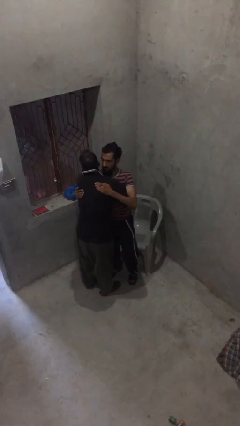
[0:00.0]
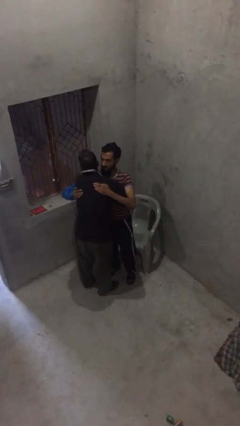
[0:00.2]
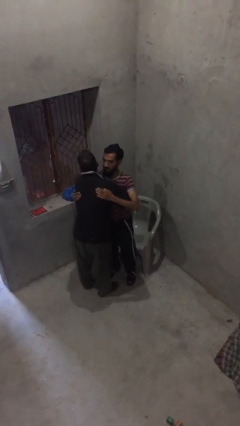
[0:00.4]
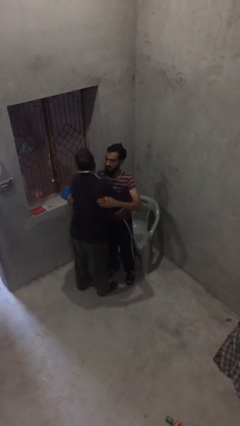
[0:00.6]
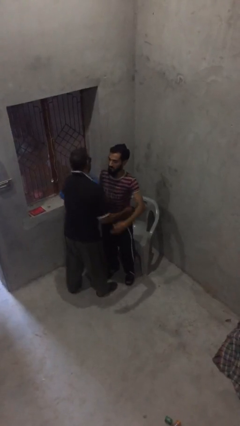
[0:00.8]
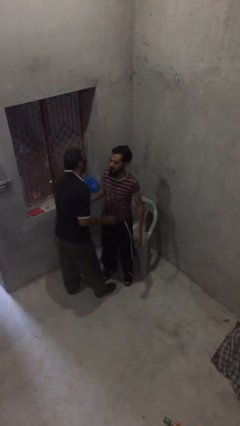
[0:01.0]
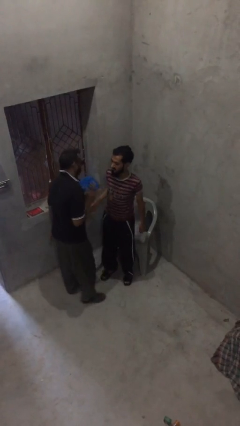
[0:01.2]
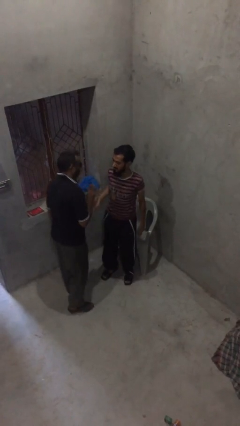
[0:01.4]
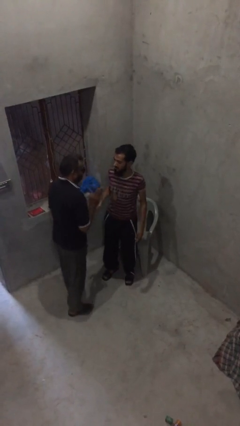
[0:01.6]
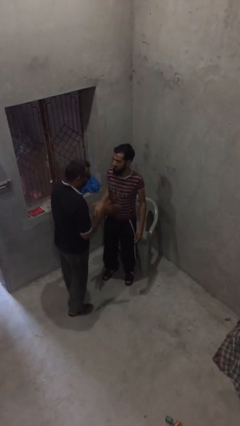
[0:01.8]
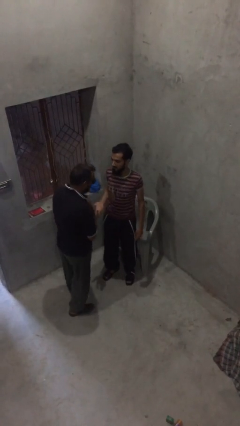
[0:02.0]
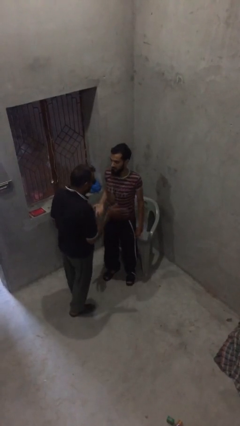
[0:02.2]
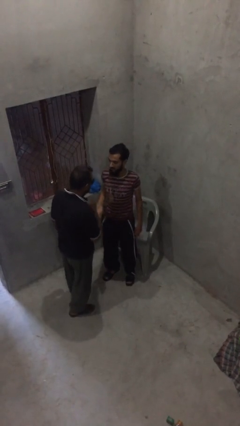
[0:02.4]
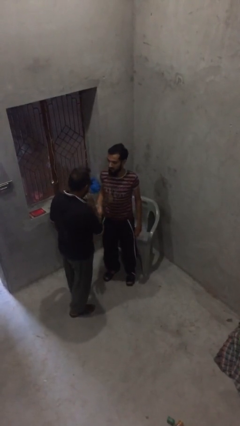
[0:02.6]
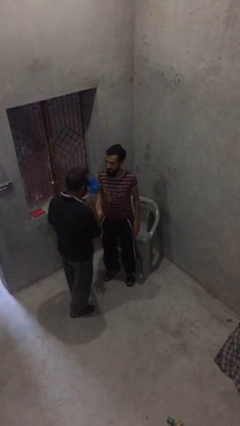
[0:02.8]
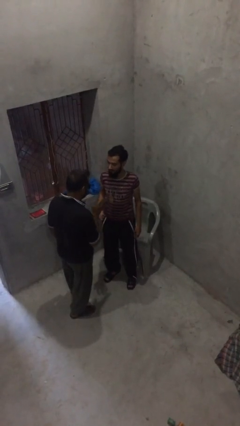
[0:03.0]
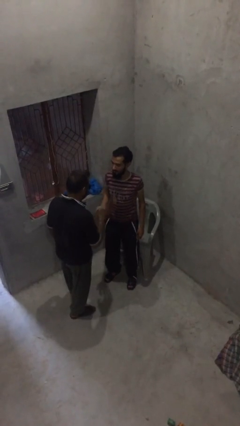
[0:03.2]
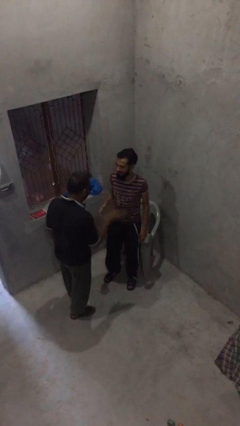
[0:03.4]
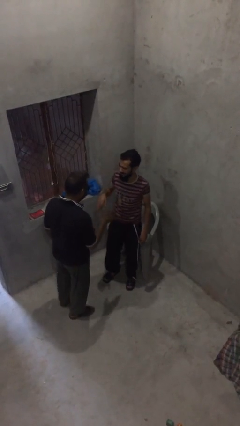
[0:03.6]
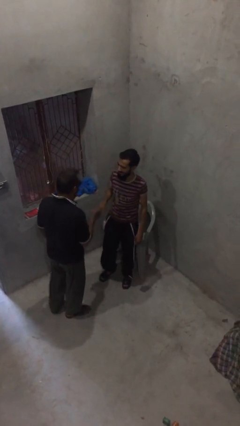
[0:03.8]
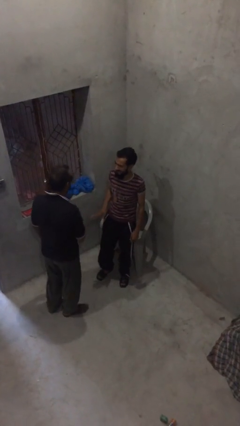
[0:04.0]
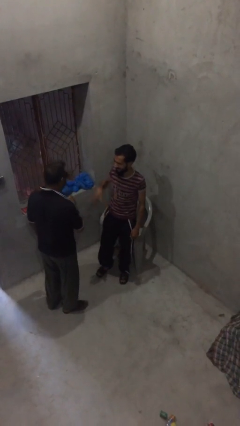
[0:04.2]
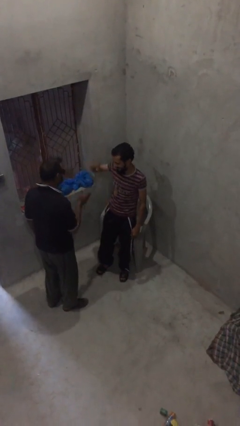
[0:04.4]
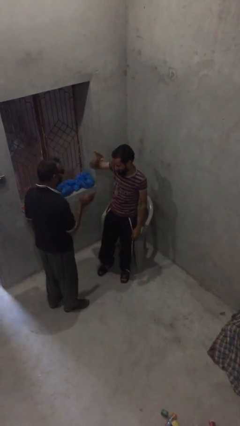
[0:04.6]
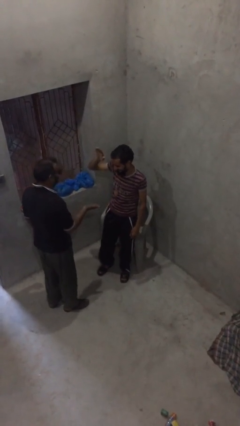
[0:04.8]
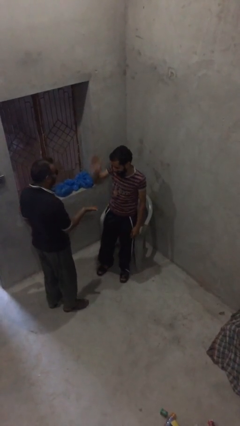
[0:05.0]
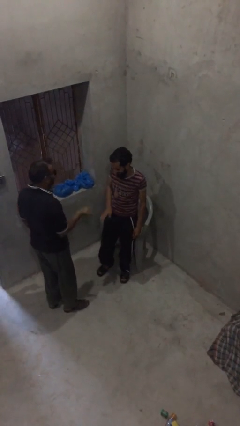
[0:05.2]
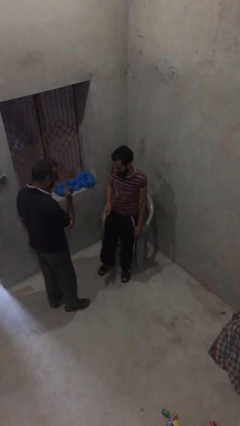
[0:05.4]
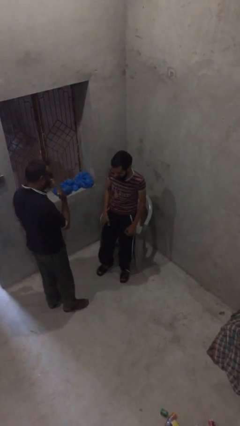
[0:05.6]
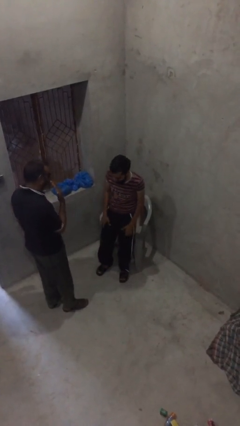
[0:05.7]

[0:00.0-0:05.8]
person talks to person

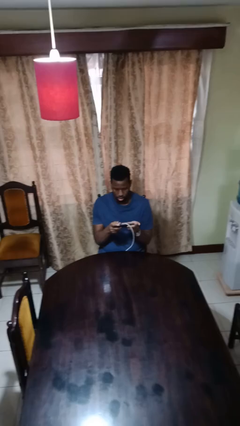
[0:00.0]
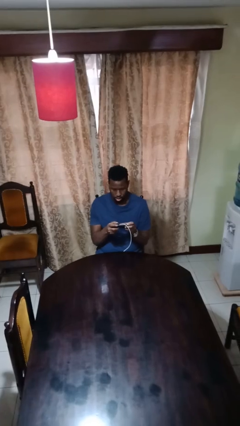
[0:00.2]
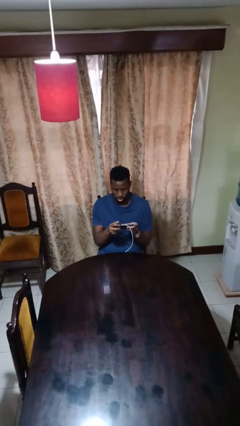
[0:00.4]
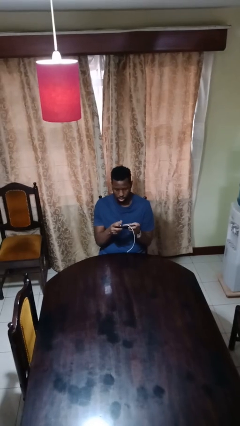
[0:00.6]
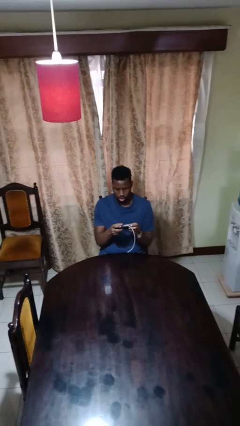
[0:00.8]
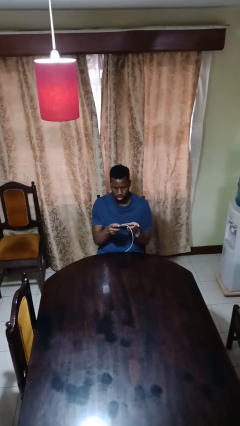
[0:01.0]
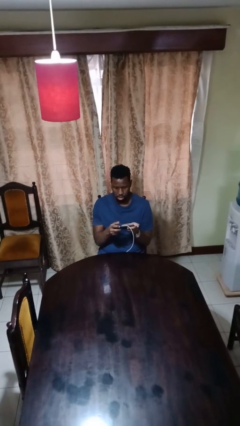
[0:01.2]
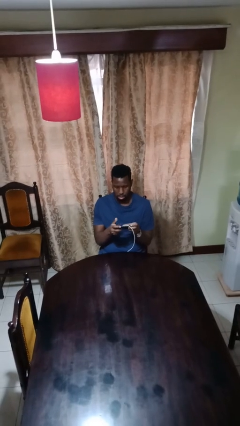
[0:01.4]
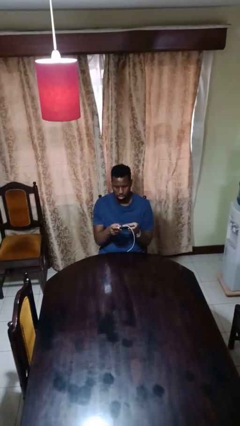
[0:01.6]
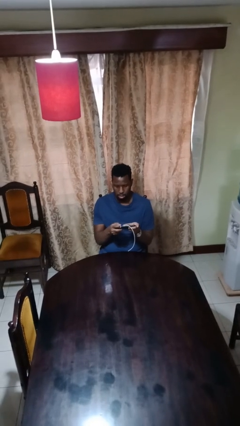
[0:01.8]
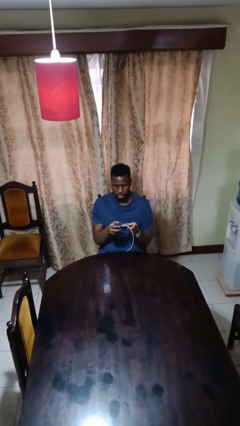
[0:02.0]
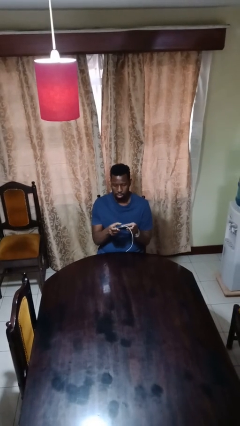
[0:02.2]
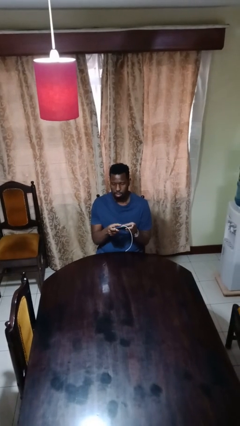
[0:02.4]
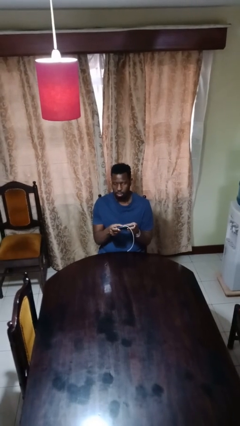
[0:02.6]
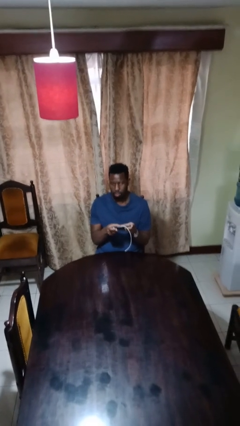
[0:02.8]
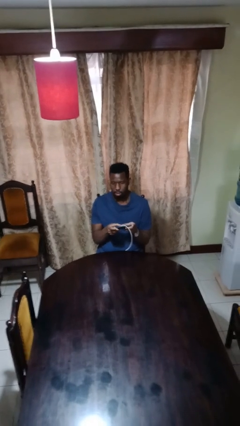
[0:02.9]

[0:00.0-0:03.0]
person interacts with handheld game

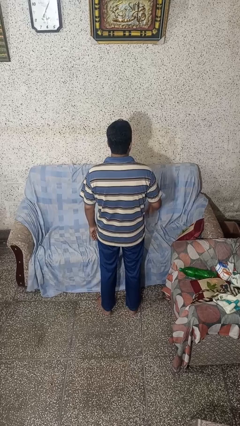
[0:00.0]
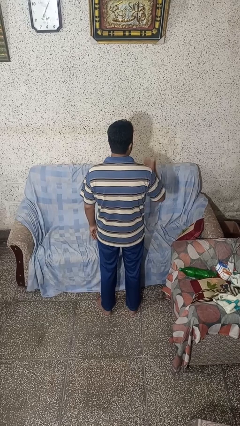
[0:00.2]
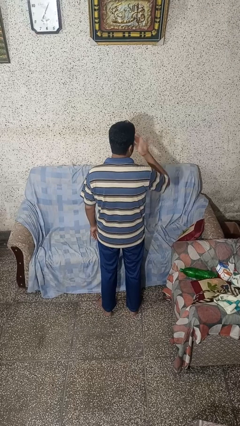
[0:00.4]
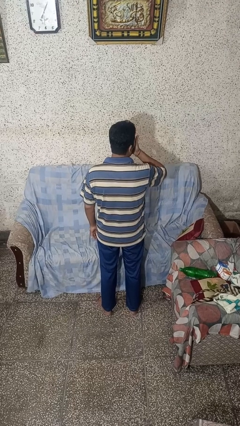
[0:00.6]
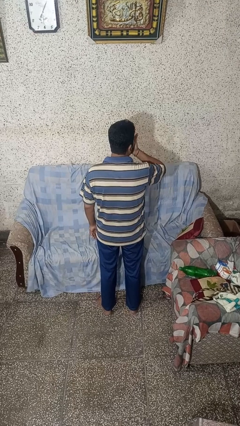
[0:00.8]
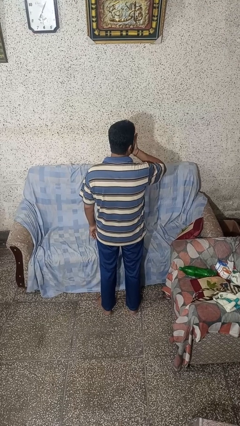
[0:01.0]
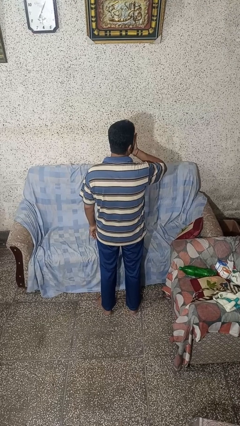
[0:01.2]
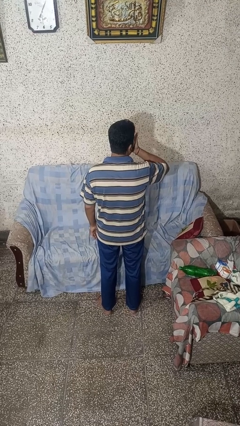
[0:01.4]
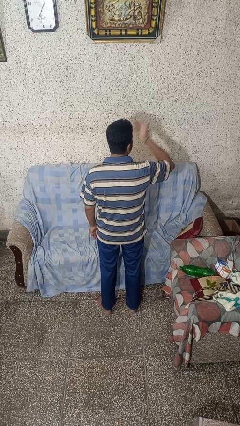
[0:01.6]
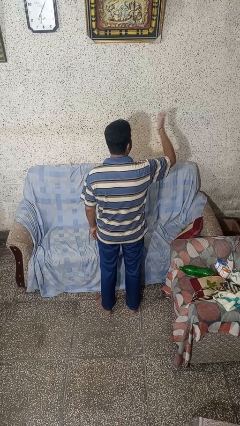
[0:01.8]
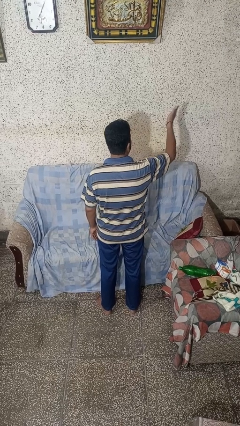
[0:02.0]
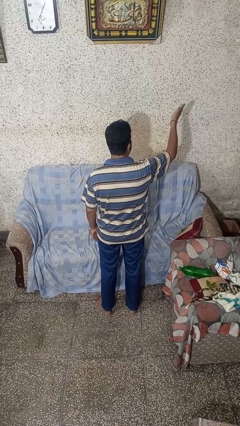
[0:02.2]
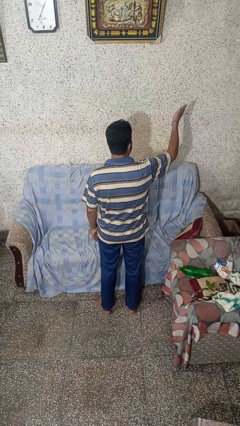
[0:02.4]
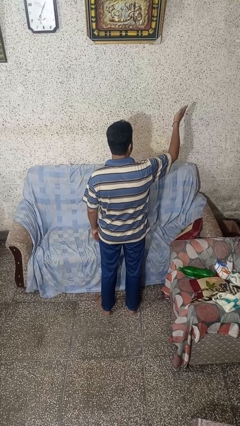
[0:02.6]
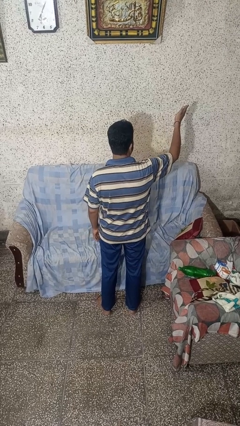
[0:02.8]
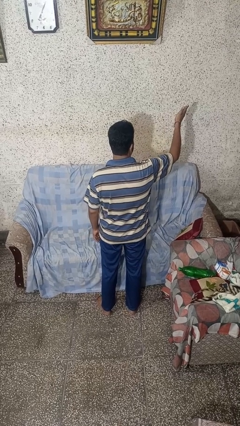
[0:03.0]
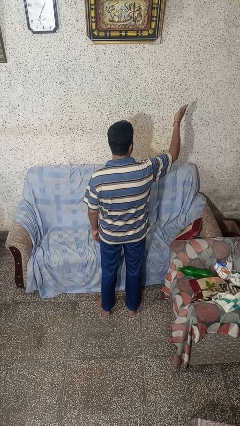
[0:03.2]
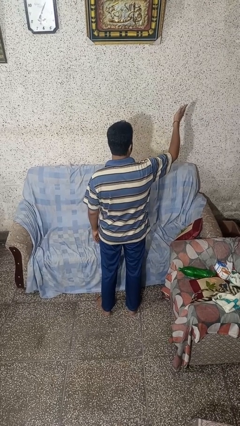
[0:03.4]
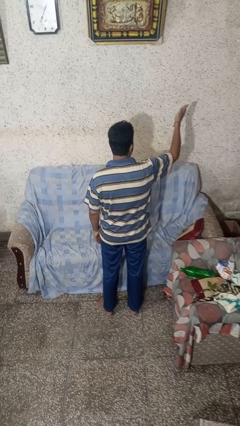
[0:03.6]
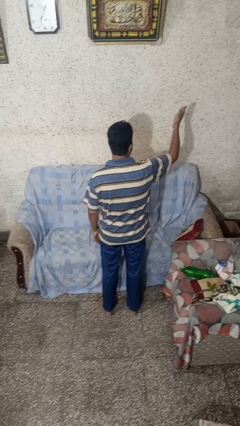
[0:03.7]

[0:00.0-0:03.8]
person gestures blow kiss

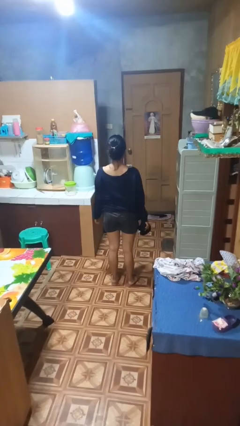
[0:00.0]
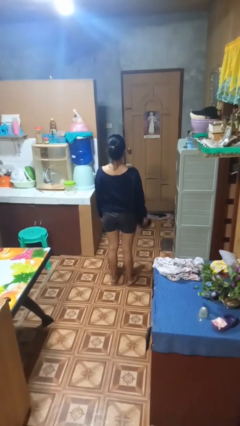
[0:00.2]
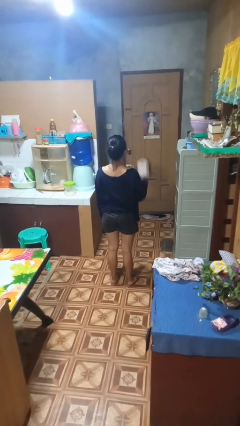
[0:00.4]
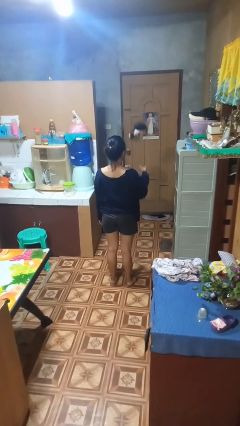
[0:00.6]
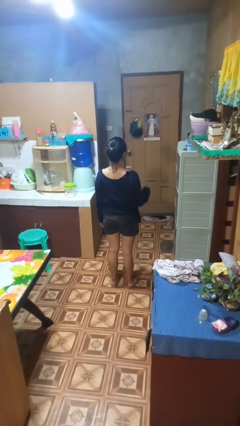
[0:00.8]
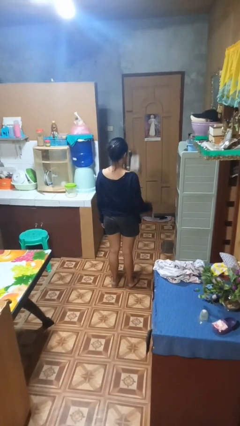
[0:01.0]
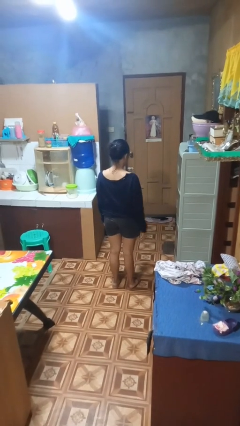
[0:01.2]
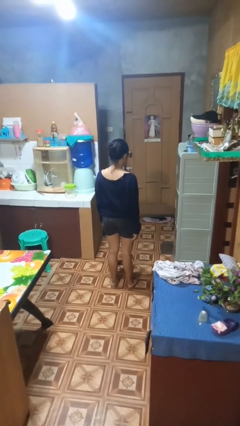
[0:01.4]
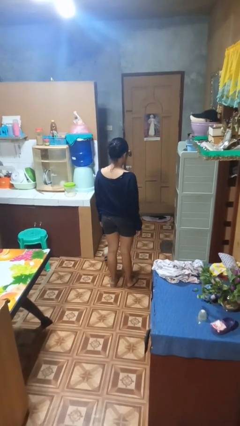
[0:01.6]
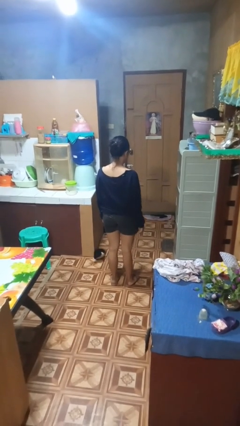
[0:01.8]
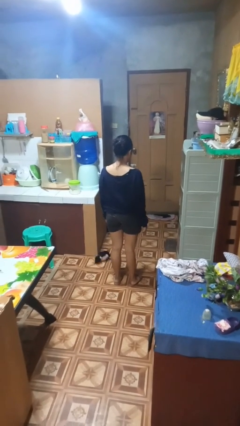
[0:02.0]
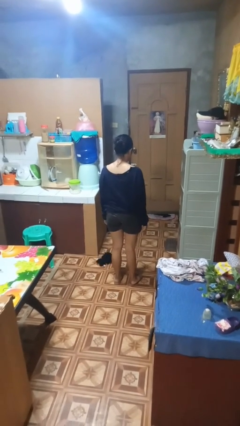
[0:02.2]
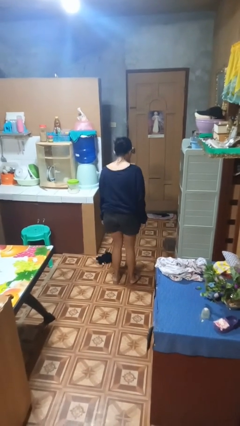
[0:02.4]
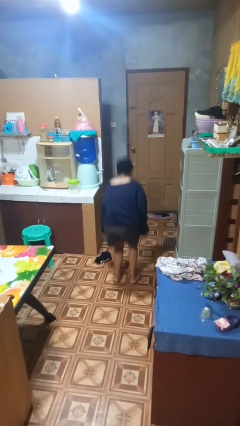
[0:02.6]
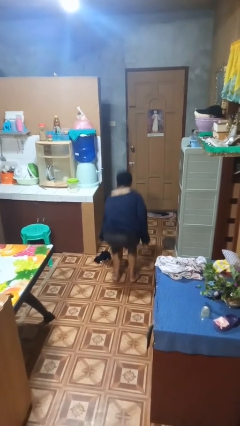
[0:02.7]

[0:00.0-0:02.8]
person throws object into air

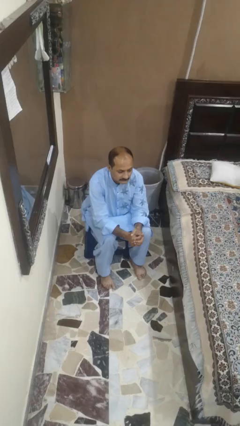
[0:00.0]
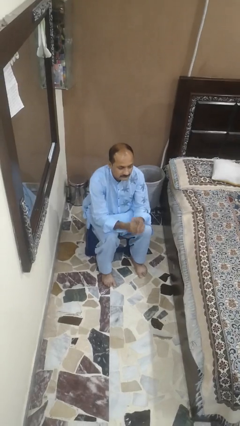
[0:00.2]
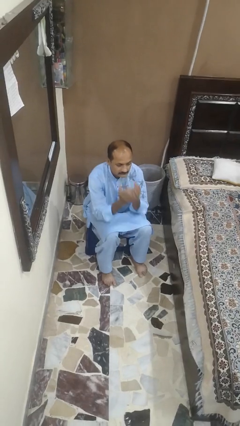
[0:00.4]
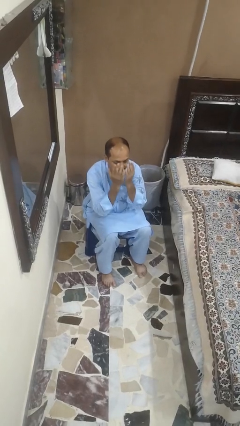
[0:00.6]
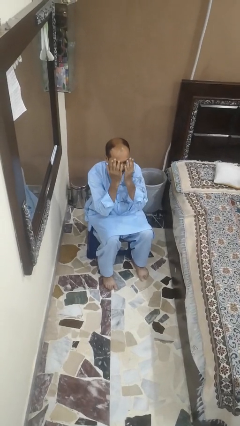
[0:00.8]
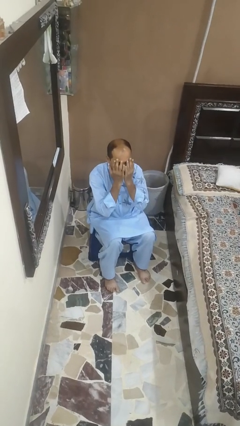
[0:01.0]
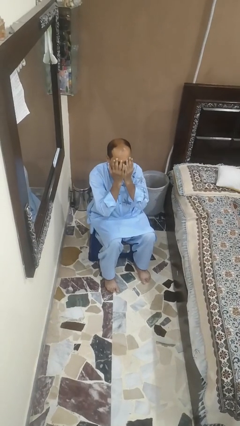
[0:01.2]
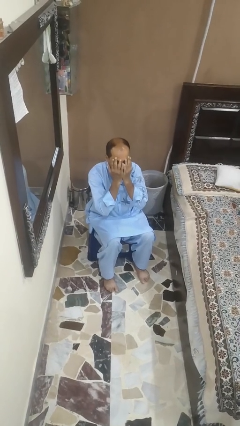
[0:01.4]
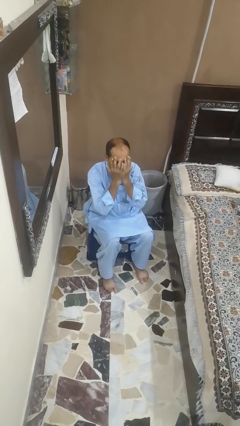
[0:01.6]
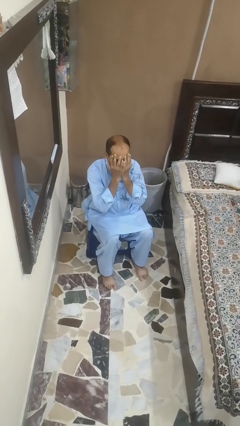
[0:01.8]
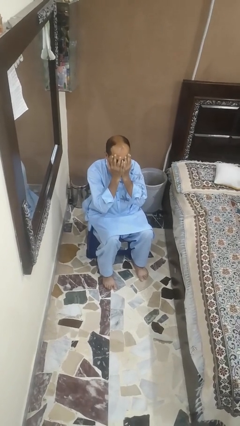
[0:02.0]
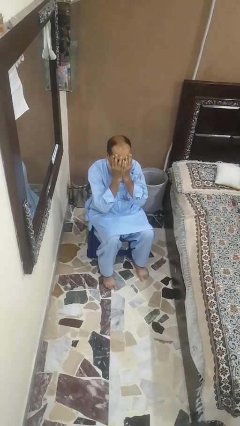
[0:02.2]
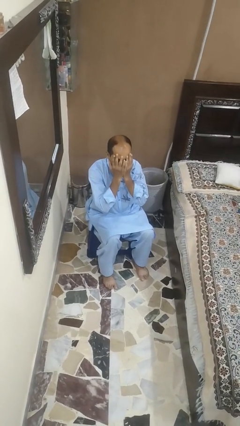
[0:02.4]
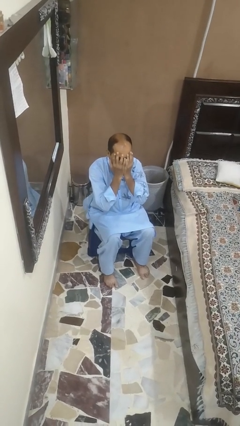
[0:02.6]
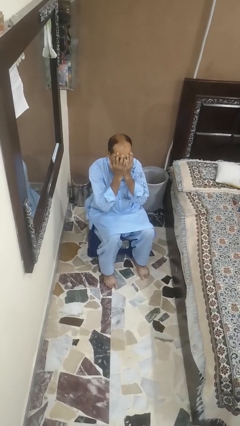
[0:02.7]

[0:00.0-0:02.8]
person covers face with hands
